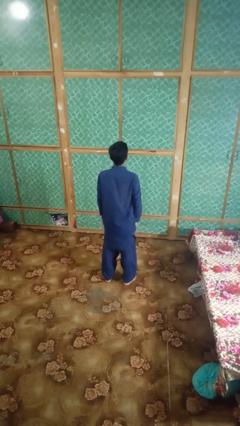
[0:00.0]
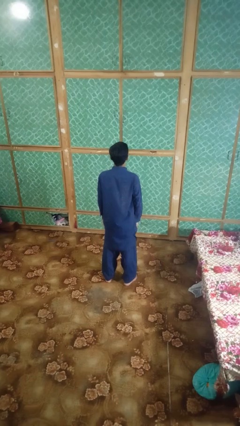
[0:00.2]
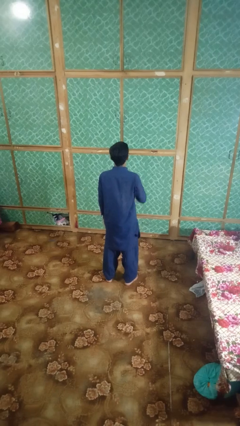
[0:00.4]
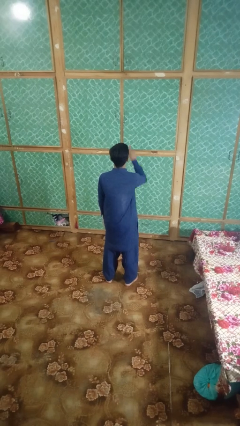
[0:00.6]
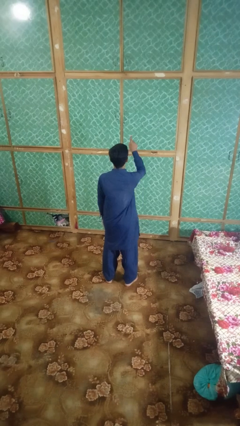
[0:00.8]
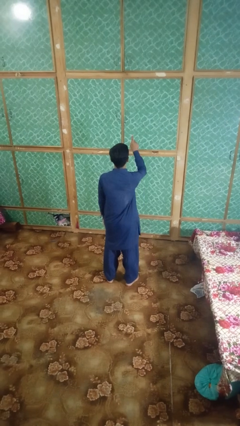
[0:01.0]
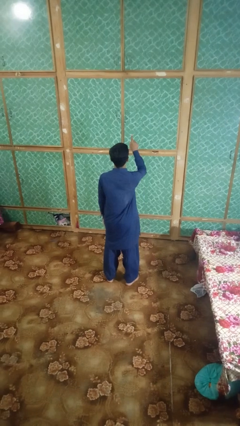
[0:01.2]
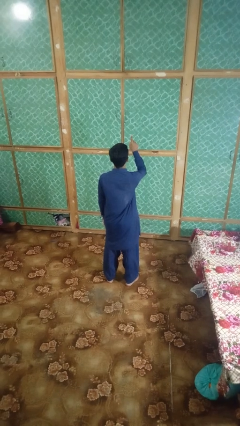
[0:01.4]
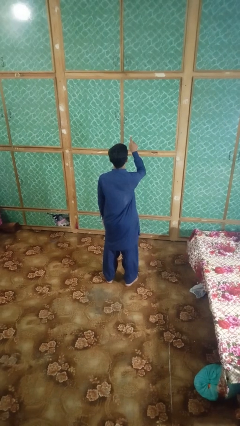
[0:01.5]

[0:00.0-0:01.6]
person gestures number one

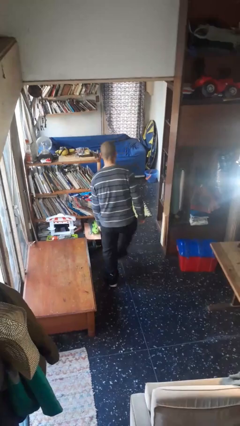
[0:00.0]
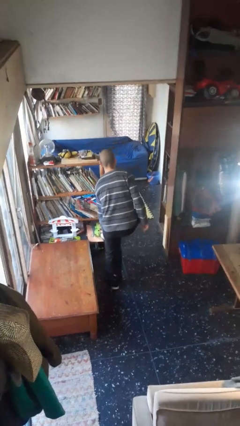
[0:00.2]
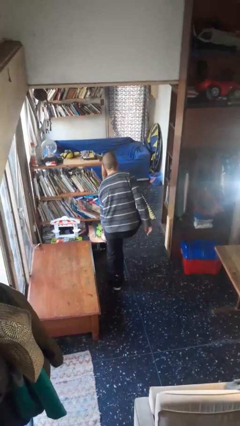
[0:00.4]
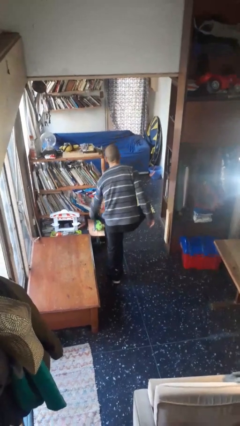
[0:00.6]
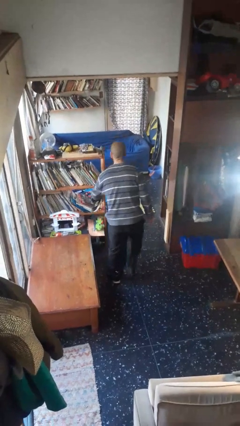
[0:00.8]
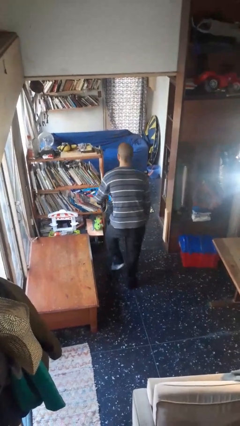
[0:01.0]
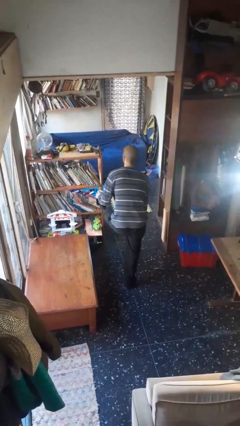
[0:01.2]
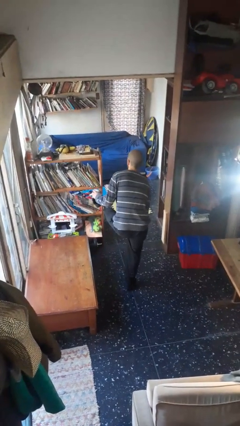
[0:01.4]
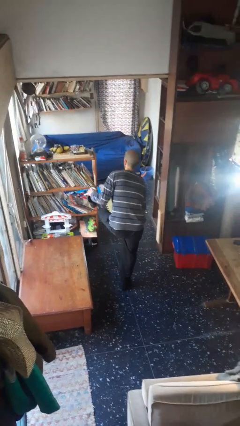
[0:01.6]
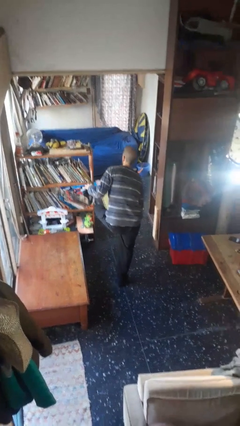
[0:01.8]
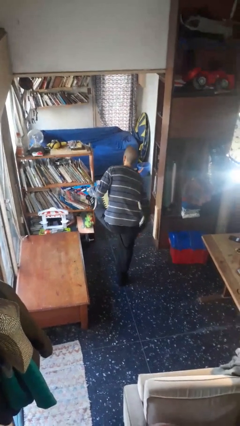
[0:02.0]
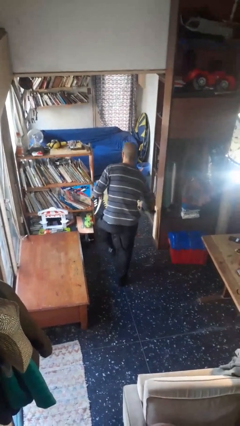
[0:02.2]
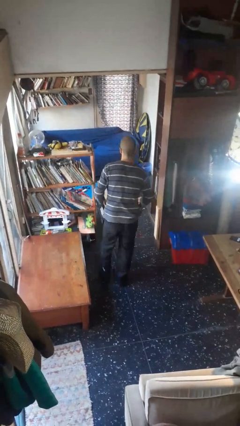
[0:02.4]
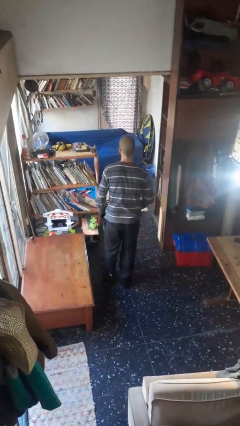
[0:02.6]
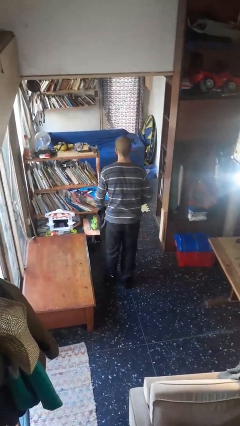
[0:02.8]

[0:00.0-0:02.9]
person takes off shoes

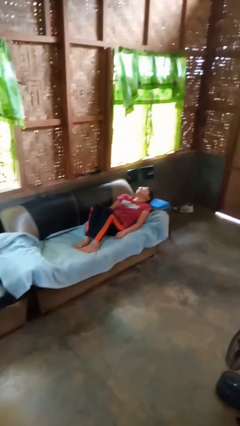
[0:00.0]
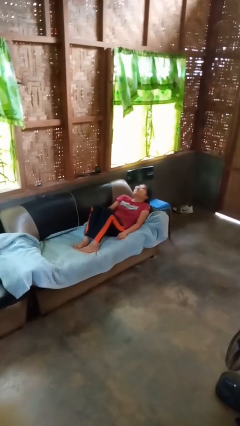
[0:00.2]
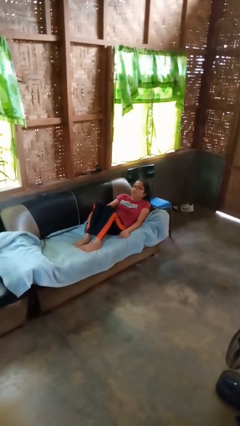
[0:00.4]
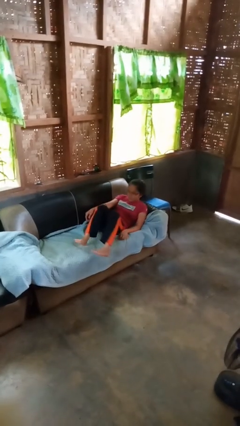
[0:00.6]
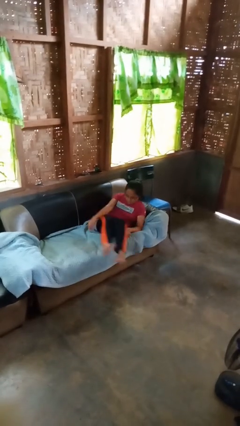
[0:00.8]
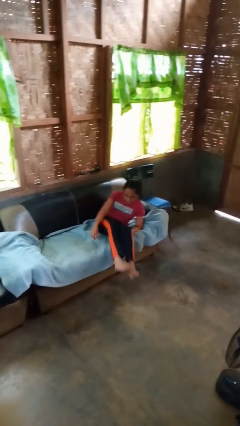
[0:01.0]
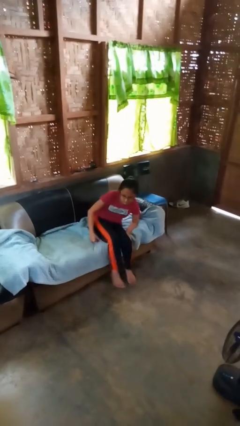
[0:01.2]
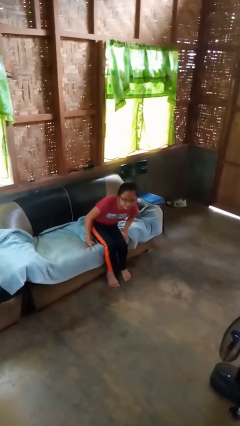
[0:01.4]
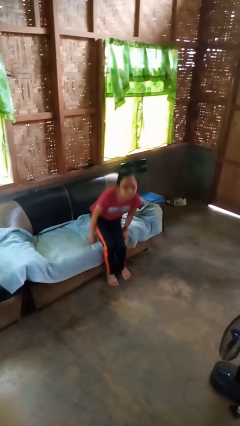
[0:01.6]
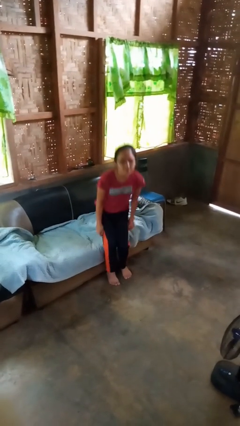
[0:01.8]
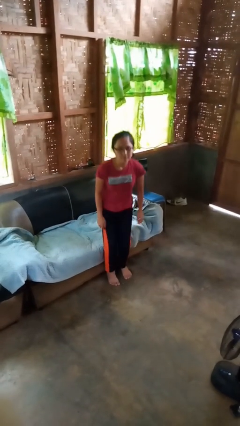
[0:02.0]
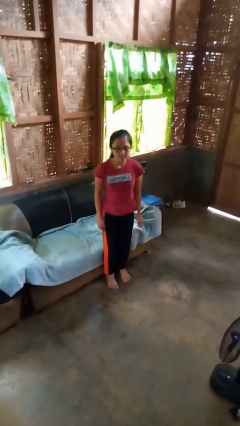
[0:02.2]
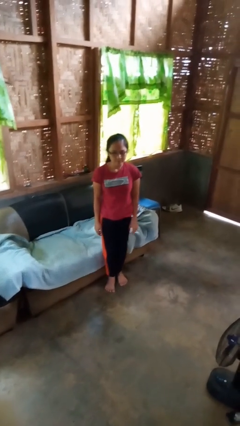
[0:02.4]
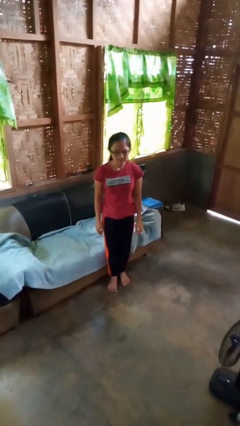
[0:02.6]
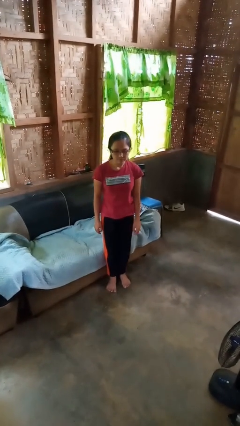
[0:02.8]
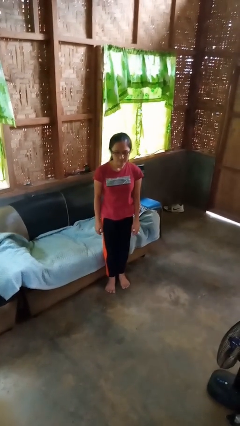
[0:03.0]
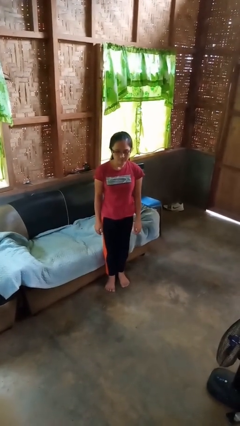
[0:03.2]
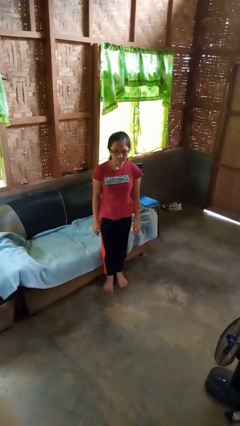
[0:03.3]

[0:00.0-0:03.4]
person stands up

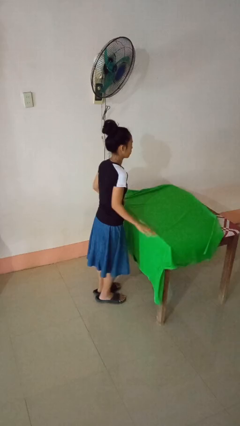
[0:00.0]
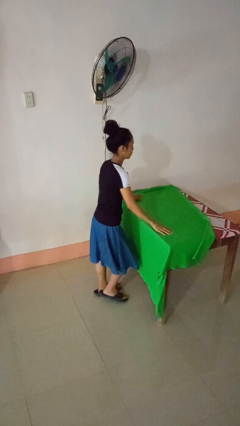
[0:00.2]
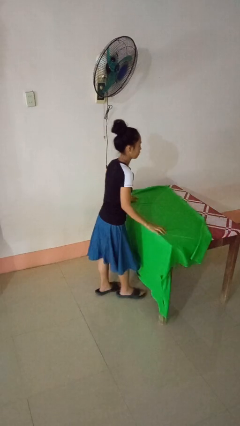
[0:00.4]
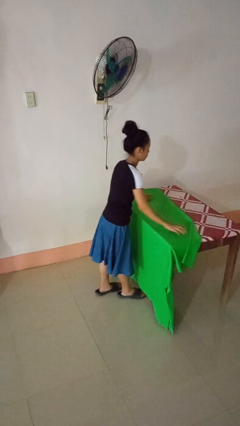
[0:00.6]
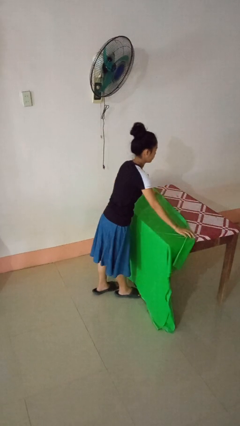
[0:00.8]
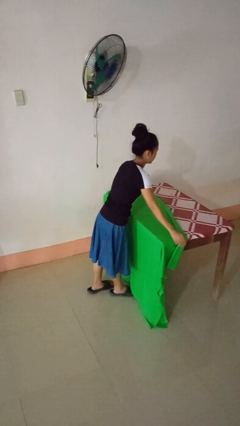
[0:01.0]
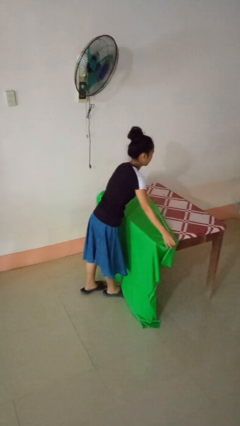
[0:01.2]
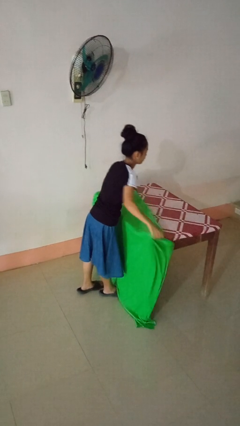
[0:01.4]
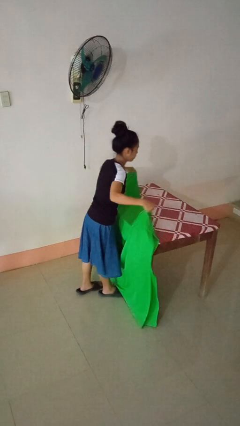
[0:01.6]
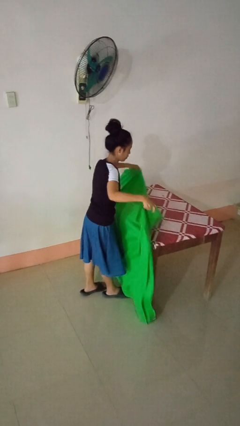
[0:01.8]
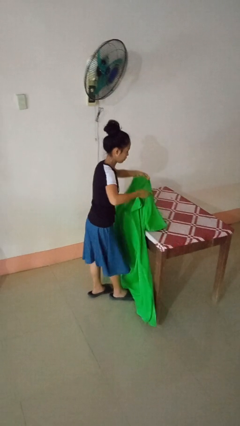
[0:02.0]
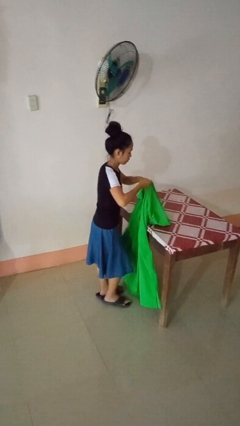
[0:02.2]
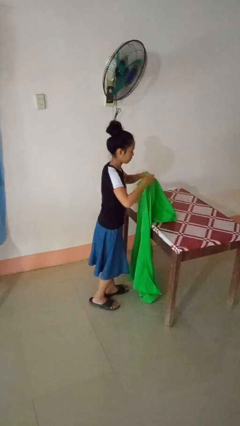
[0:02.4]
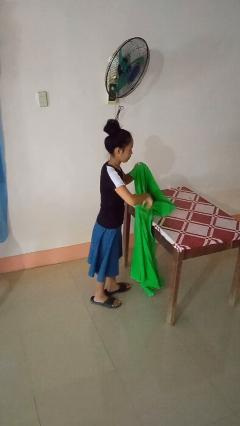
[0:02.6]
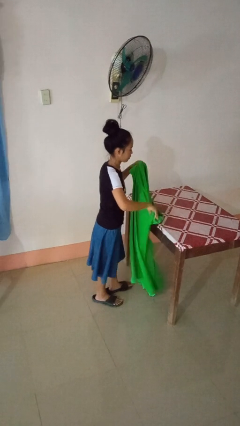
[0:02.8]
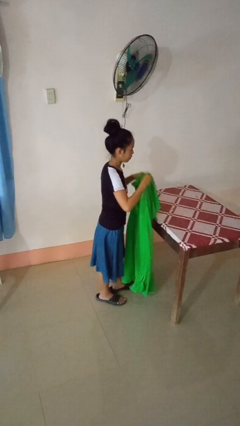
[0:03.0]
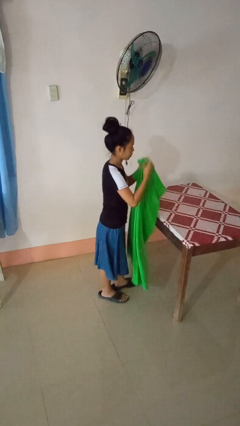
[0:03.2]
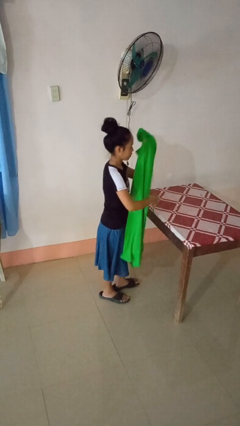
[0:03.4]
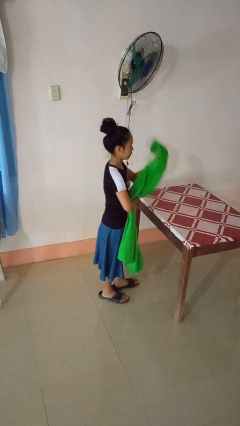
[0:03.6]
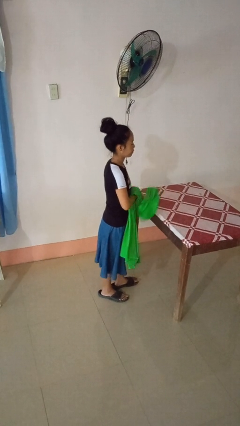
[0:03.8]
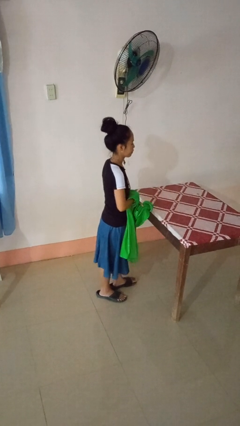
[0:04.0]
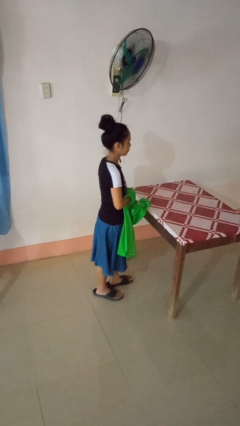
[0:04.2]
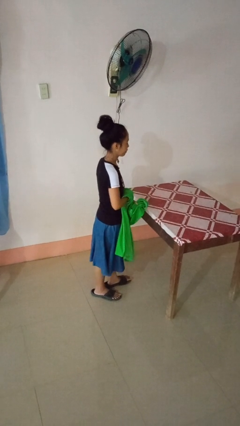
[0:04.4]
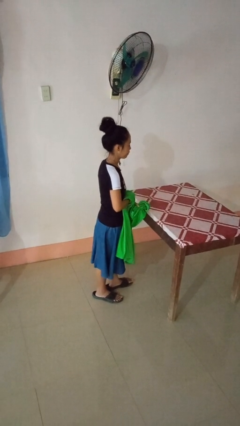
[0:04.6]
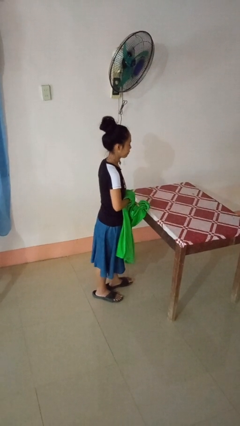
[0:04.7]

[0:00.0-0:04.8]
person folds tablecloth

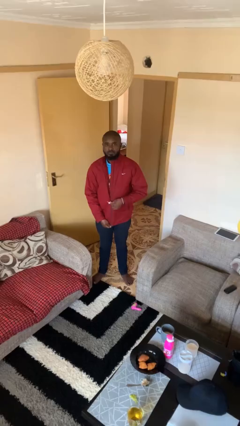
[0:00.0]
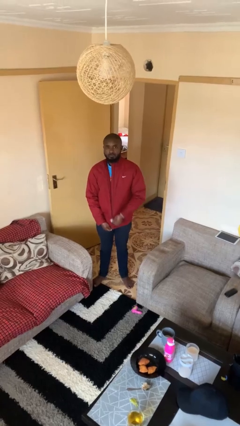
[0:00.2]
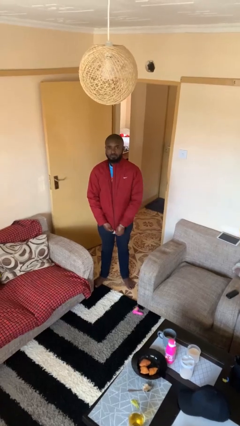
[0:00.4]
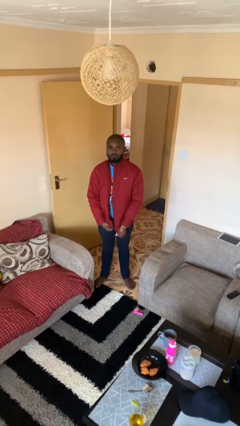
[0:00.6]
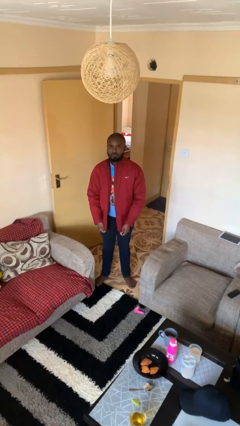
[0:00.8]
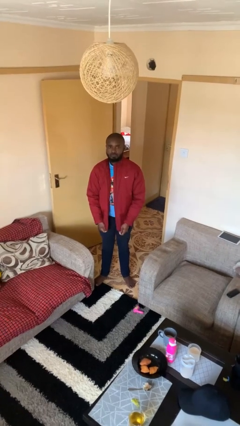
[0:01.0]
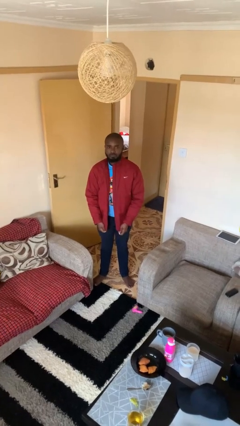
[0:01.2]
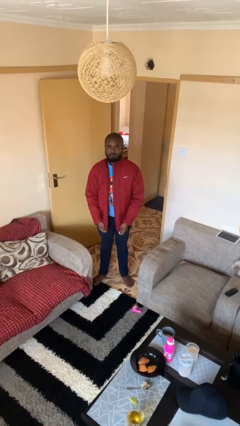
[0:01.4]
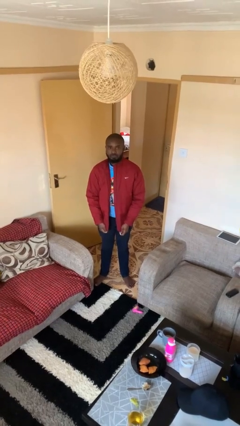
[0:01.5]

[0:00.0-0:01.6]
person unzips jacket

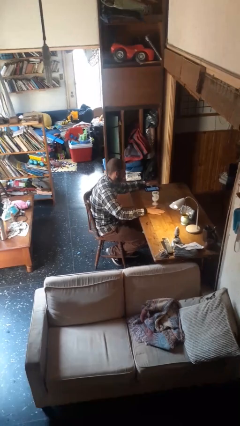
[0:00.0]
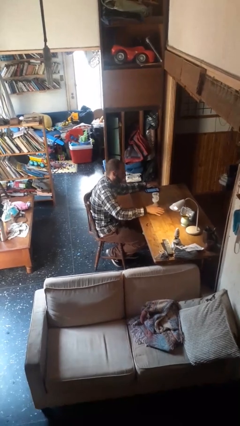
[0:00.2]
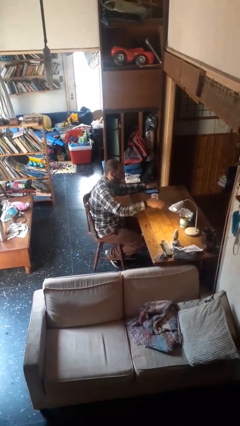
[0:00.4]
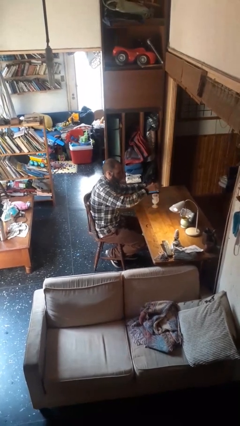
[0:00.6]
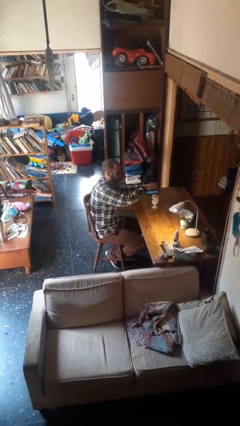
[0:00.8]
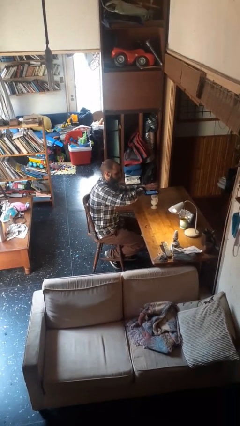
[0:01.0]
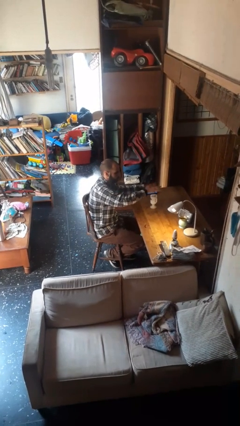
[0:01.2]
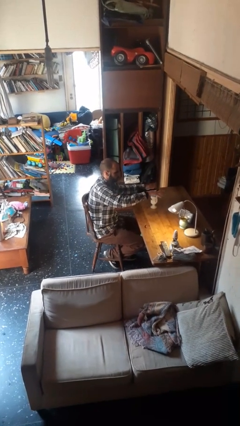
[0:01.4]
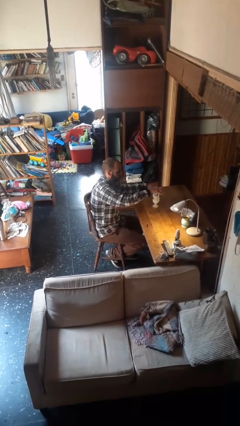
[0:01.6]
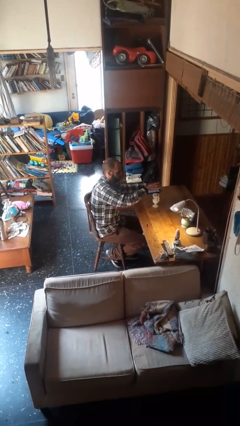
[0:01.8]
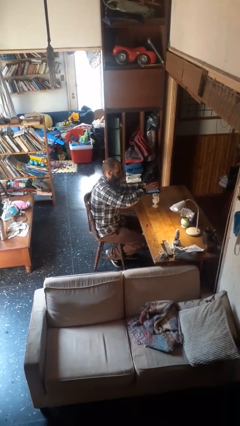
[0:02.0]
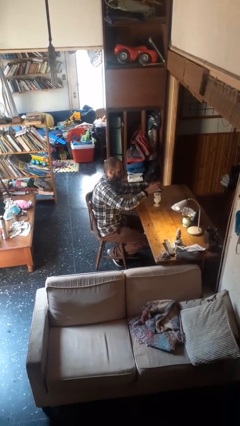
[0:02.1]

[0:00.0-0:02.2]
person waves hand over object

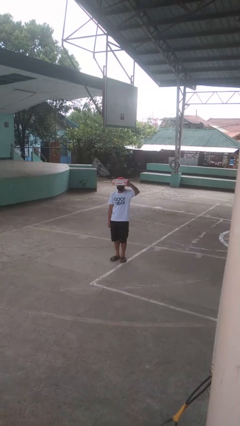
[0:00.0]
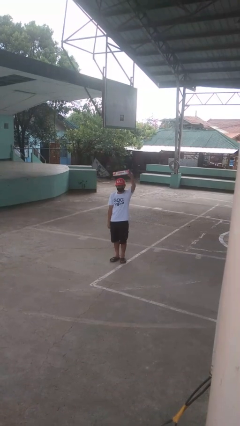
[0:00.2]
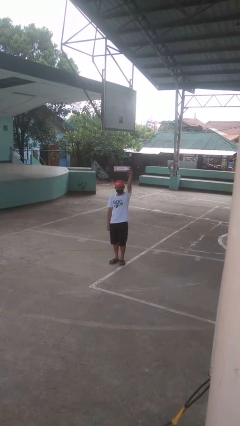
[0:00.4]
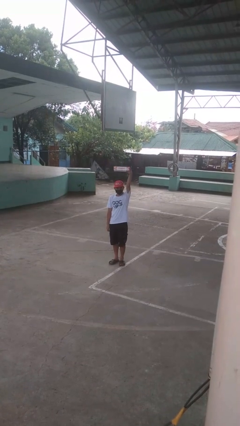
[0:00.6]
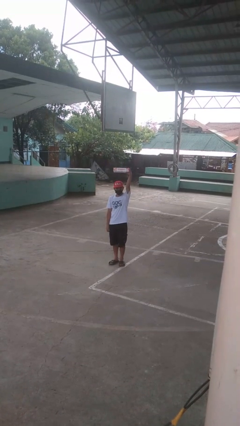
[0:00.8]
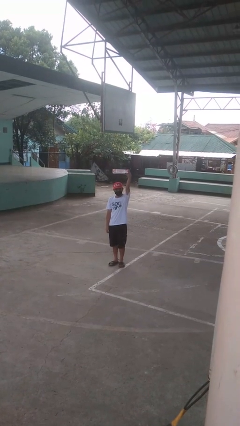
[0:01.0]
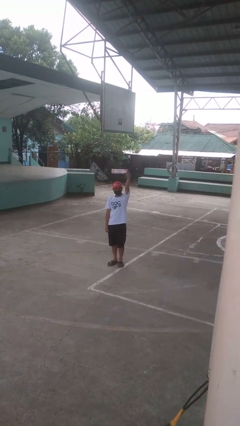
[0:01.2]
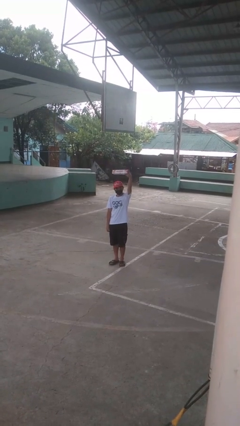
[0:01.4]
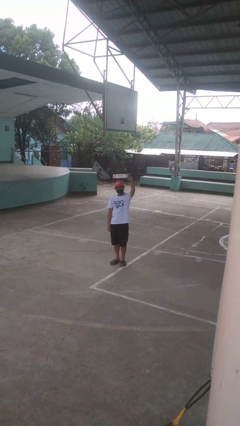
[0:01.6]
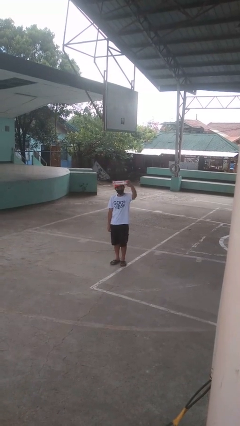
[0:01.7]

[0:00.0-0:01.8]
person holds object above head
